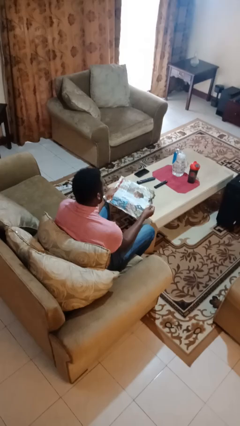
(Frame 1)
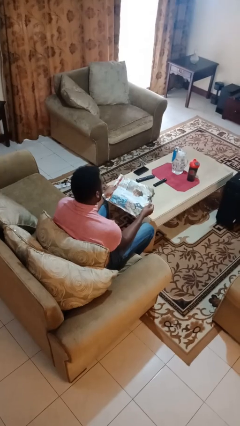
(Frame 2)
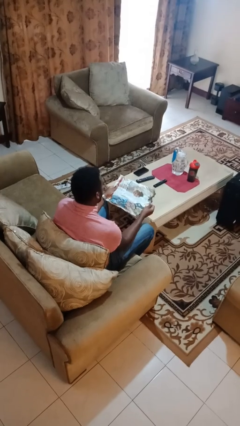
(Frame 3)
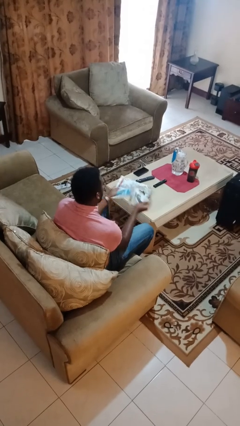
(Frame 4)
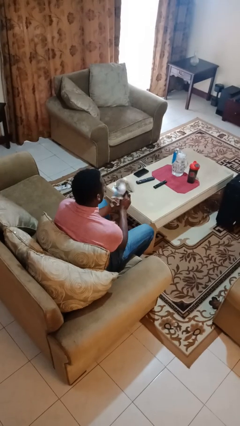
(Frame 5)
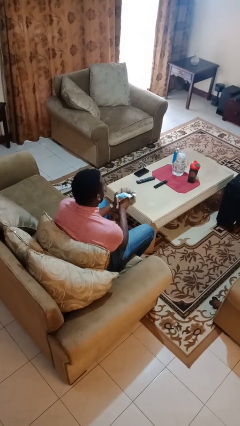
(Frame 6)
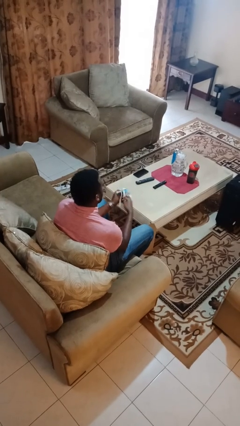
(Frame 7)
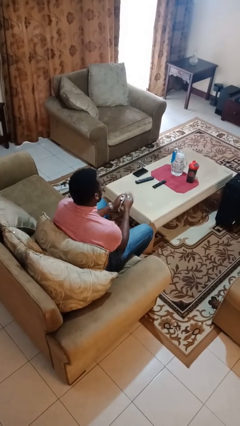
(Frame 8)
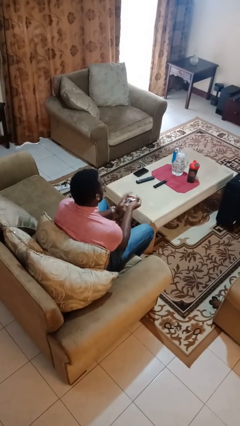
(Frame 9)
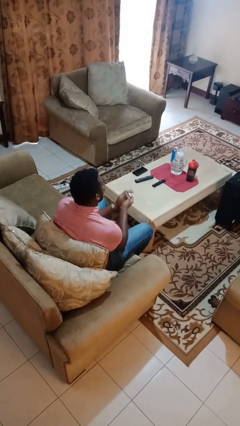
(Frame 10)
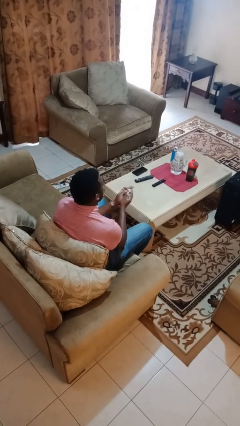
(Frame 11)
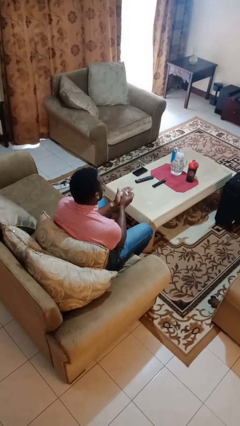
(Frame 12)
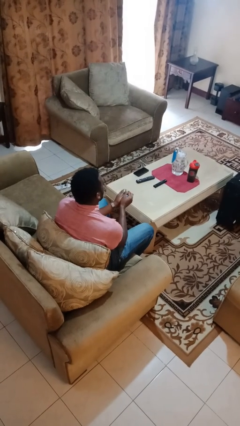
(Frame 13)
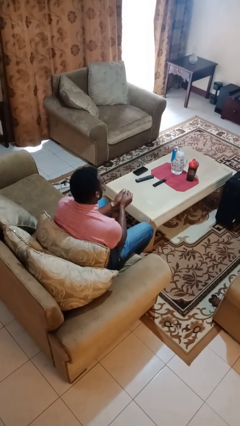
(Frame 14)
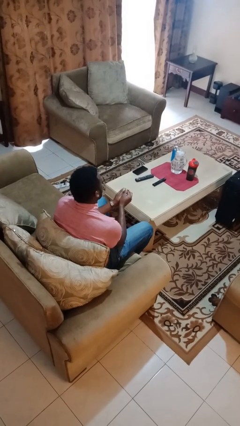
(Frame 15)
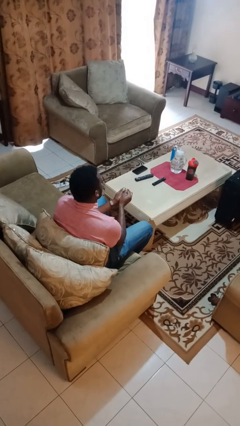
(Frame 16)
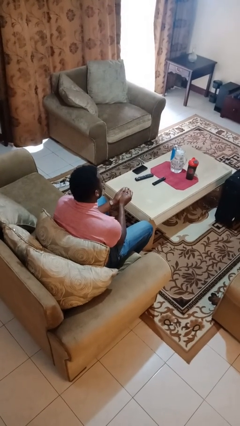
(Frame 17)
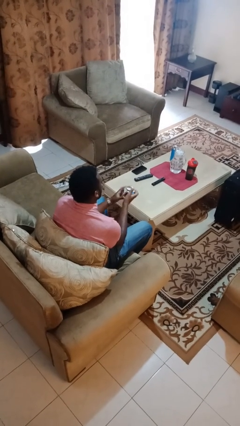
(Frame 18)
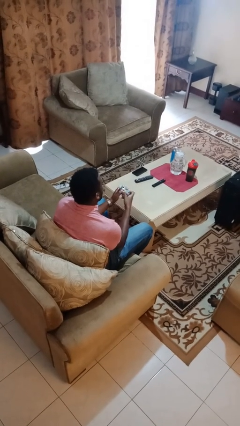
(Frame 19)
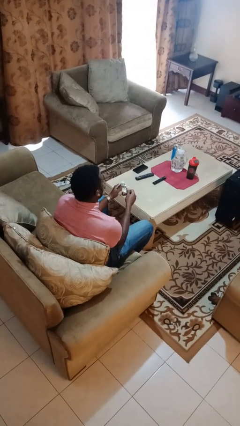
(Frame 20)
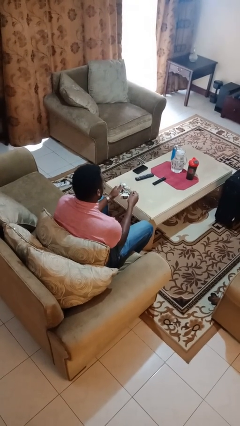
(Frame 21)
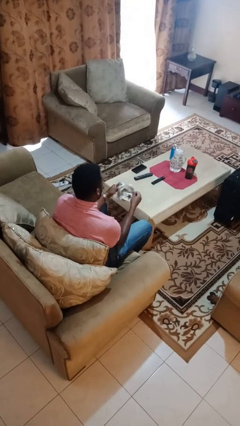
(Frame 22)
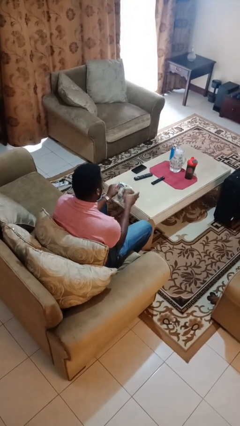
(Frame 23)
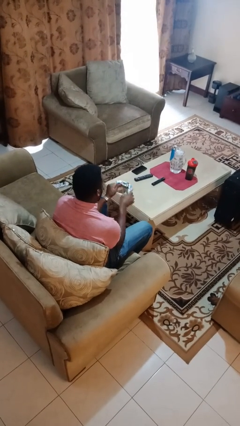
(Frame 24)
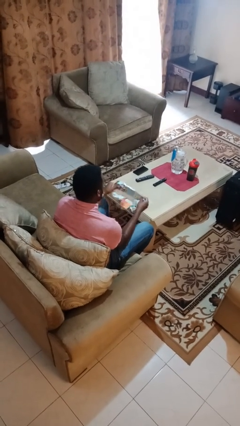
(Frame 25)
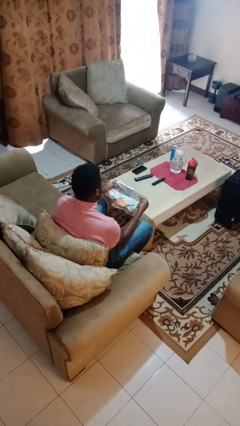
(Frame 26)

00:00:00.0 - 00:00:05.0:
person crumples paper

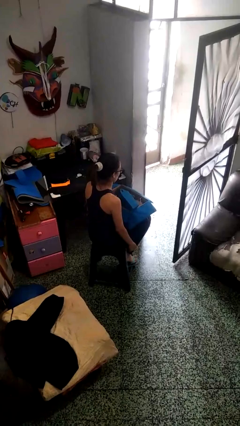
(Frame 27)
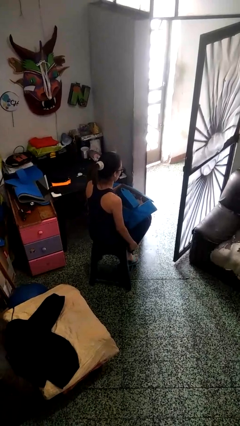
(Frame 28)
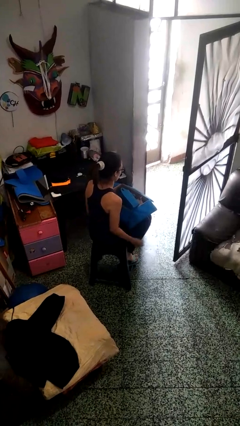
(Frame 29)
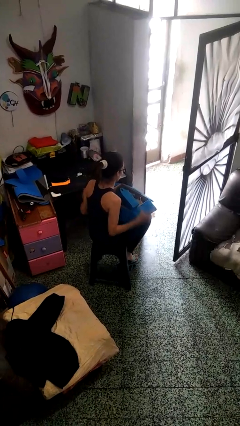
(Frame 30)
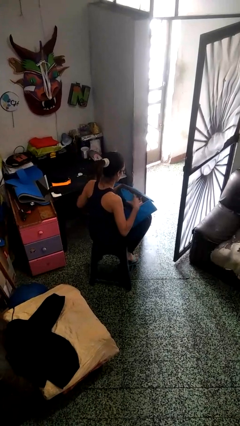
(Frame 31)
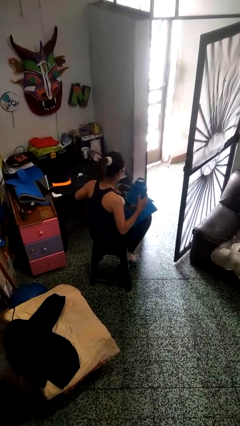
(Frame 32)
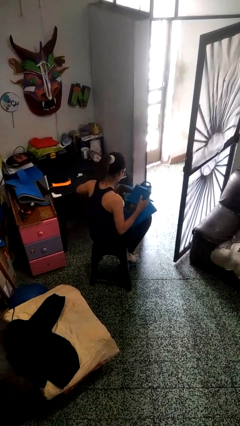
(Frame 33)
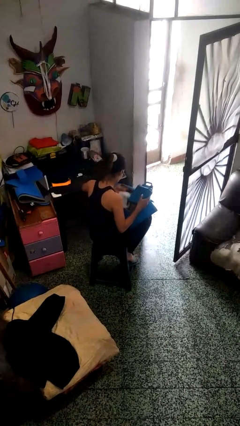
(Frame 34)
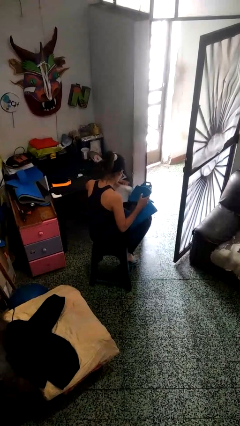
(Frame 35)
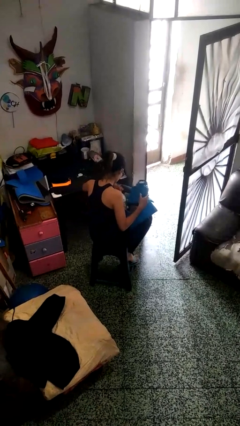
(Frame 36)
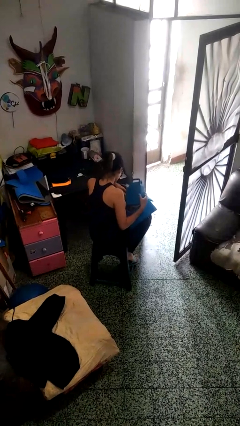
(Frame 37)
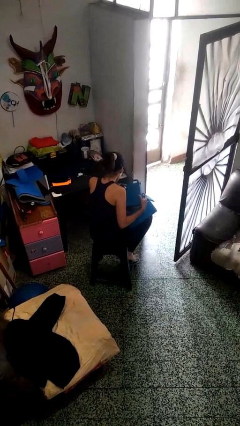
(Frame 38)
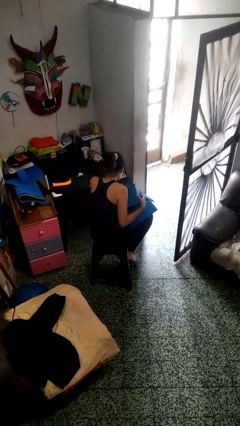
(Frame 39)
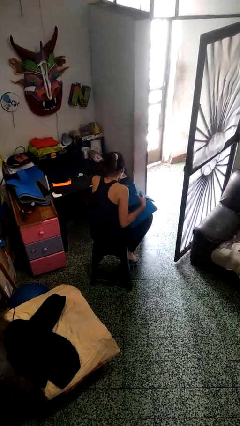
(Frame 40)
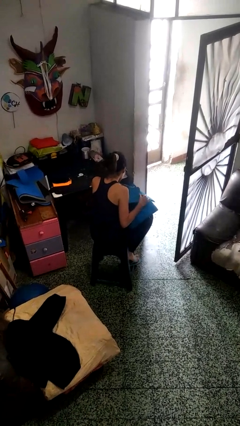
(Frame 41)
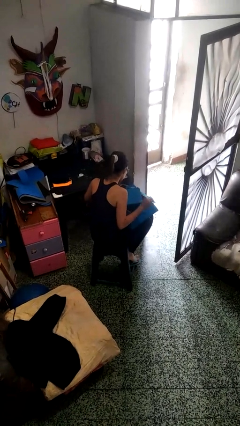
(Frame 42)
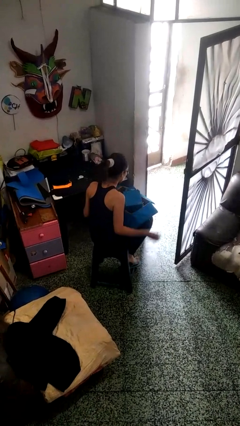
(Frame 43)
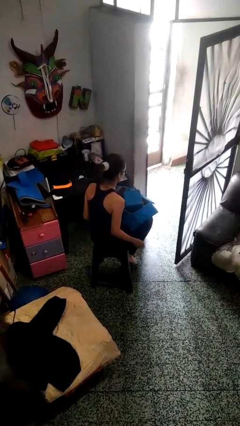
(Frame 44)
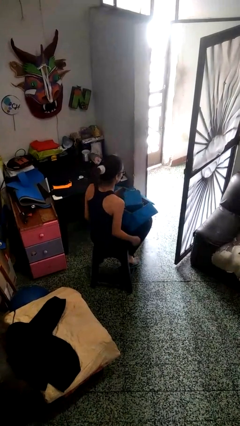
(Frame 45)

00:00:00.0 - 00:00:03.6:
person searches in box

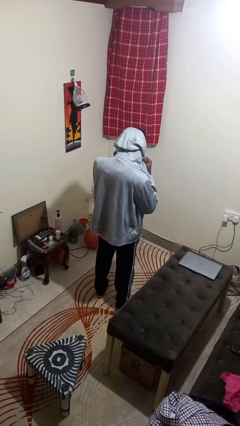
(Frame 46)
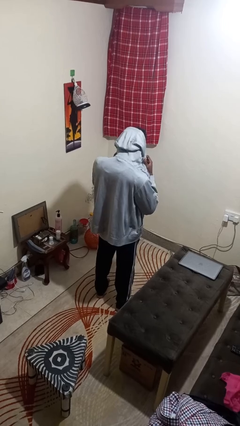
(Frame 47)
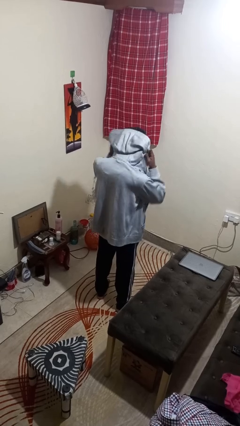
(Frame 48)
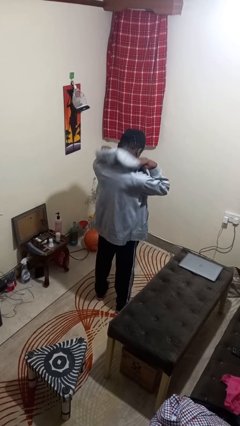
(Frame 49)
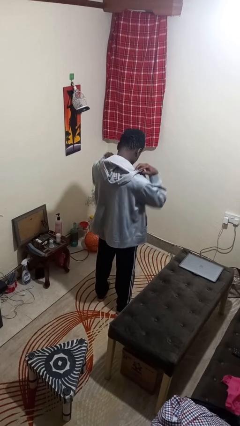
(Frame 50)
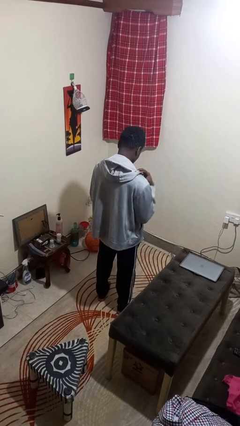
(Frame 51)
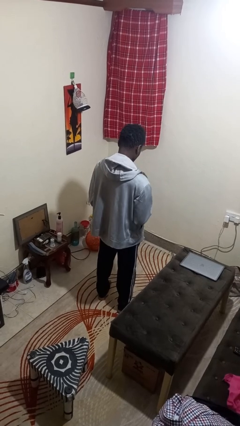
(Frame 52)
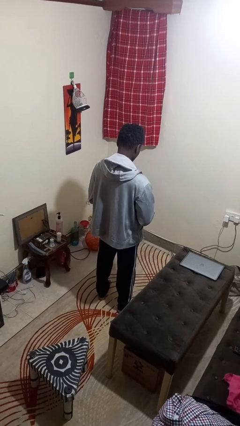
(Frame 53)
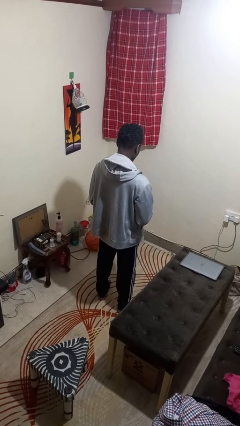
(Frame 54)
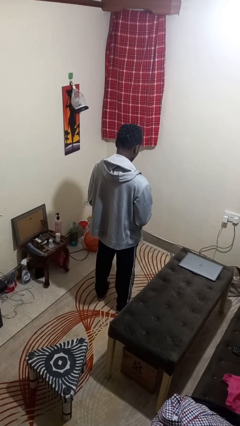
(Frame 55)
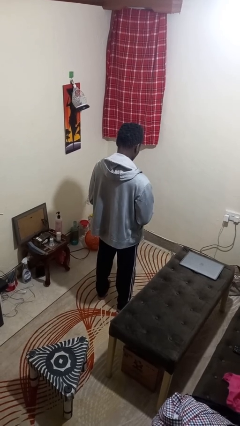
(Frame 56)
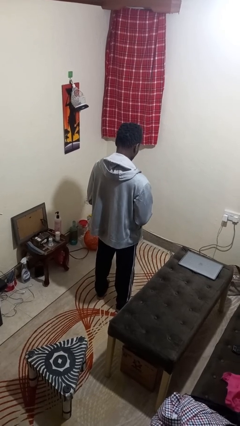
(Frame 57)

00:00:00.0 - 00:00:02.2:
person takes off hoodie

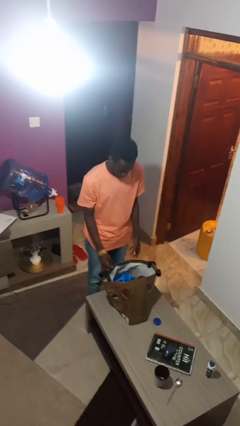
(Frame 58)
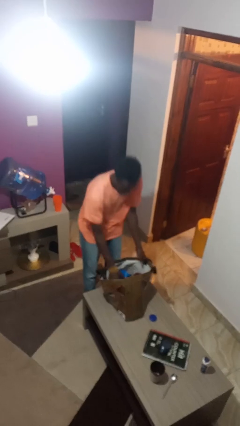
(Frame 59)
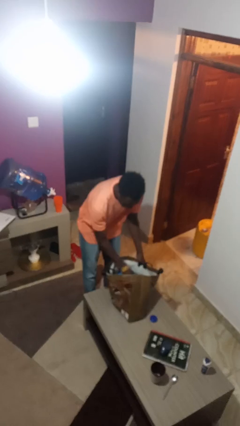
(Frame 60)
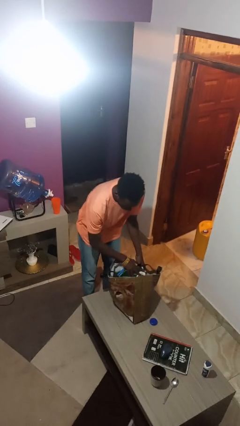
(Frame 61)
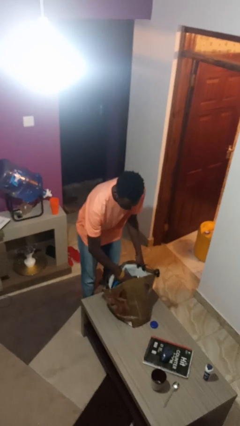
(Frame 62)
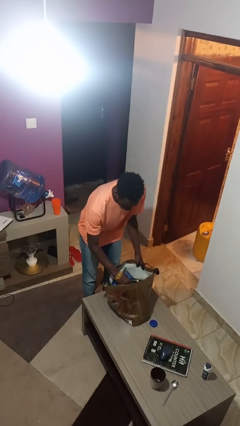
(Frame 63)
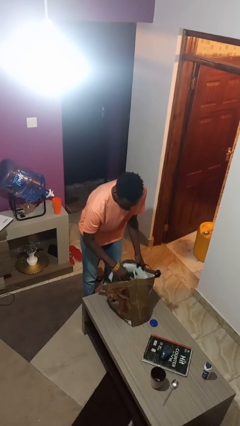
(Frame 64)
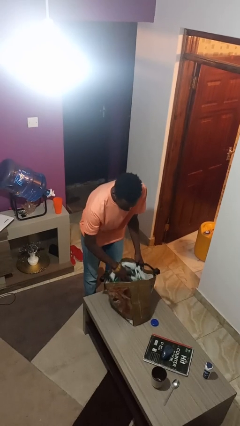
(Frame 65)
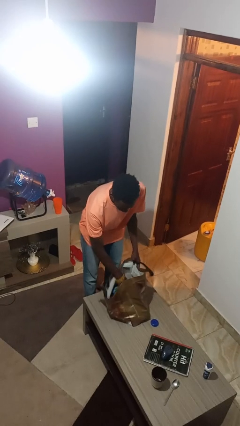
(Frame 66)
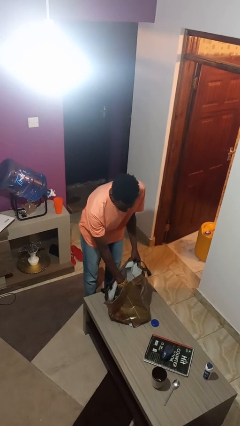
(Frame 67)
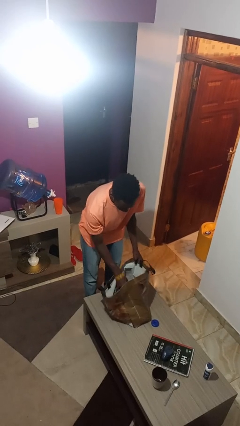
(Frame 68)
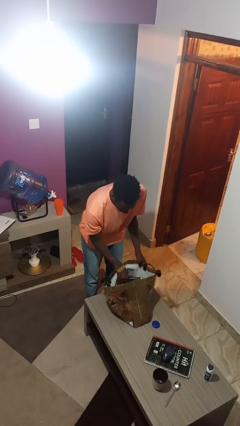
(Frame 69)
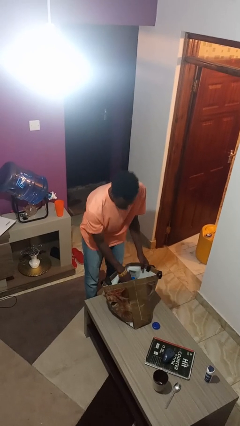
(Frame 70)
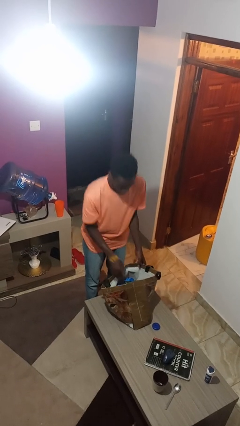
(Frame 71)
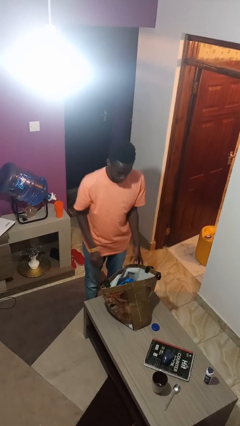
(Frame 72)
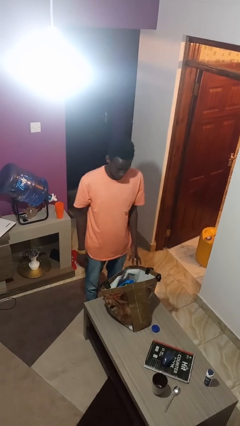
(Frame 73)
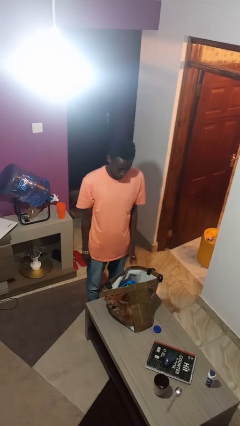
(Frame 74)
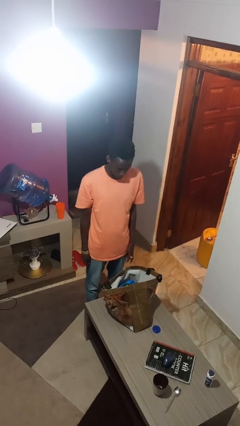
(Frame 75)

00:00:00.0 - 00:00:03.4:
person searches in bag

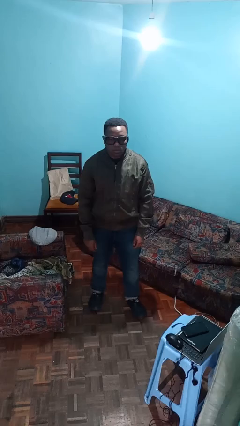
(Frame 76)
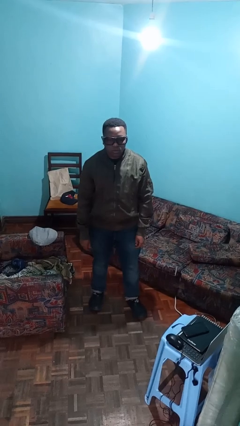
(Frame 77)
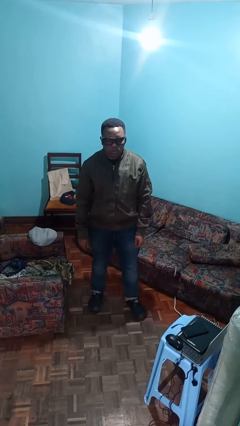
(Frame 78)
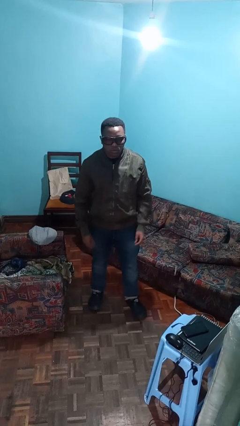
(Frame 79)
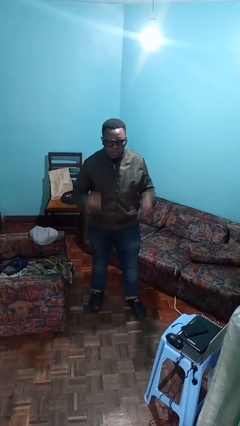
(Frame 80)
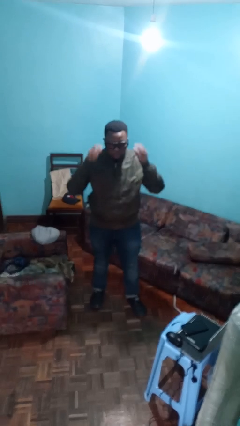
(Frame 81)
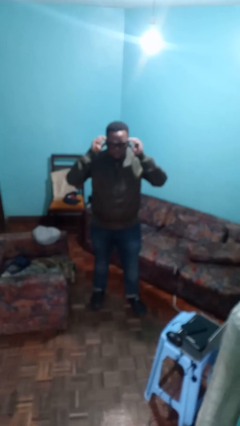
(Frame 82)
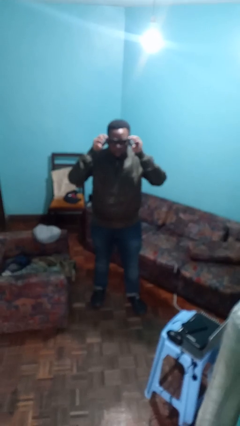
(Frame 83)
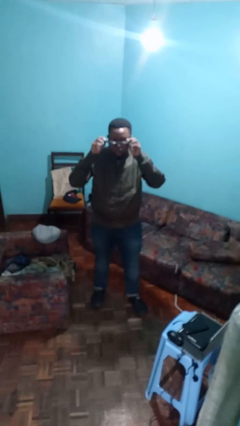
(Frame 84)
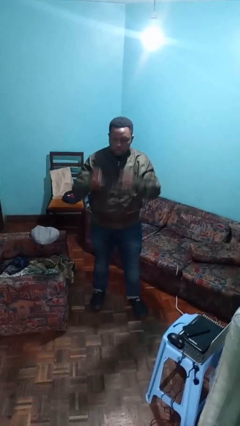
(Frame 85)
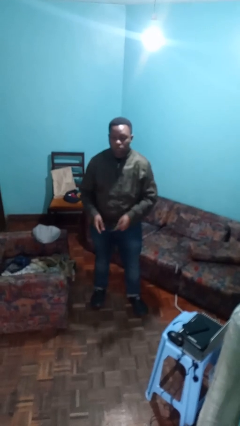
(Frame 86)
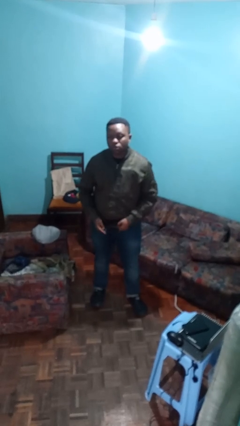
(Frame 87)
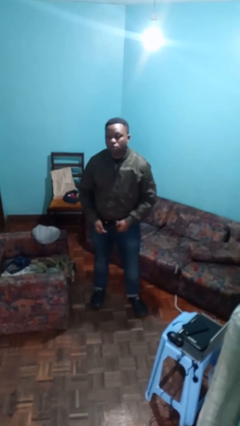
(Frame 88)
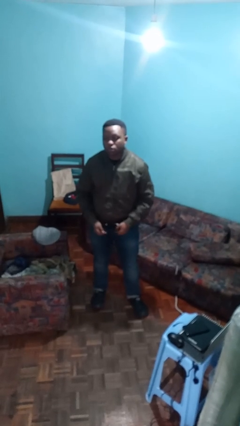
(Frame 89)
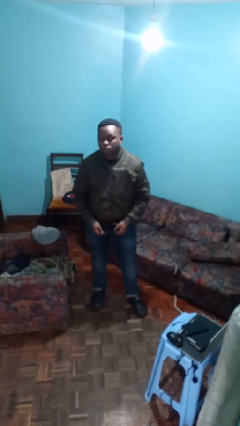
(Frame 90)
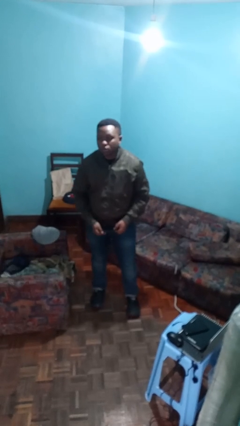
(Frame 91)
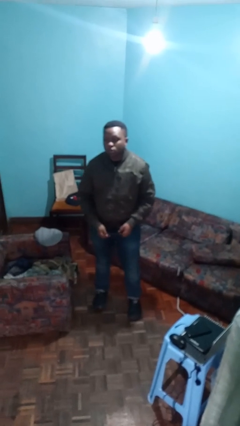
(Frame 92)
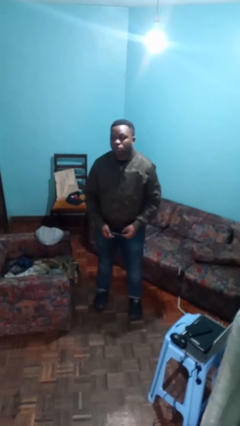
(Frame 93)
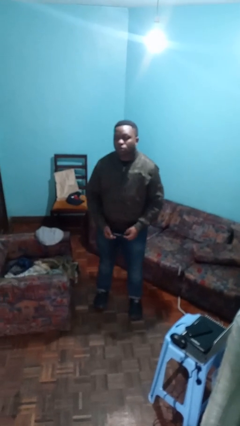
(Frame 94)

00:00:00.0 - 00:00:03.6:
person takes off glasses
